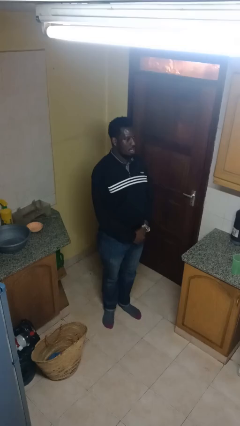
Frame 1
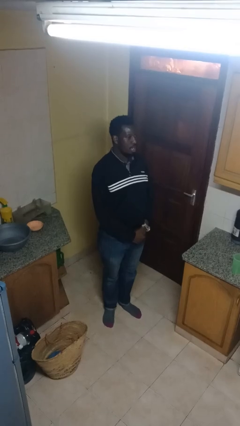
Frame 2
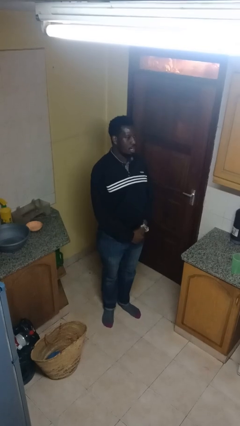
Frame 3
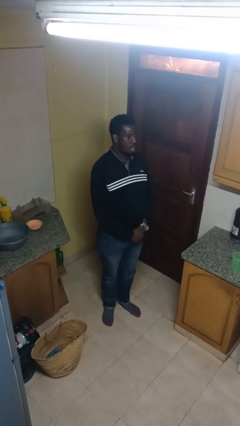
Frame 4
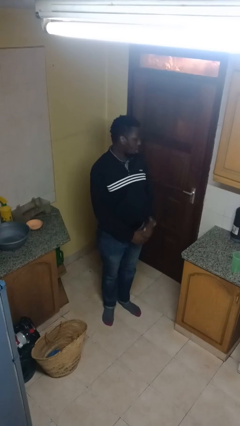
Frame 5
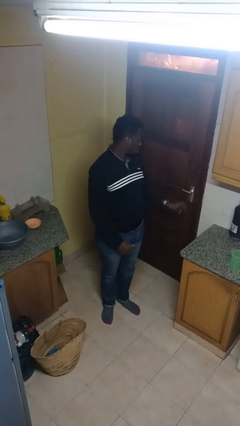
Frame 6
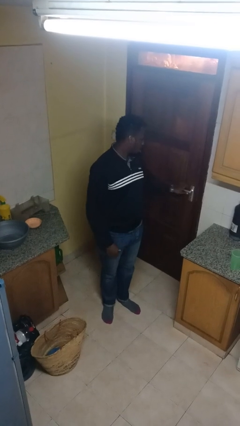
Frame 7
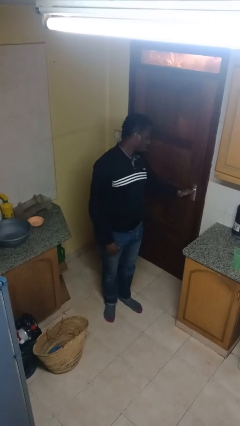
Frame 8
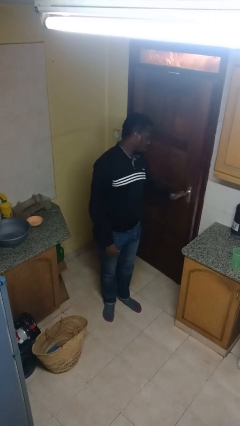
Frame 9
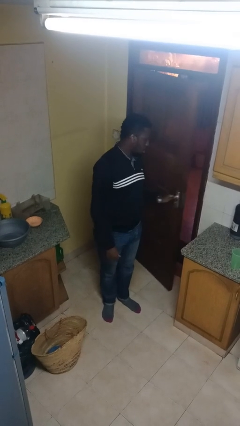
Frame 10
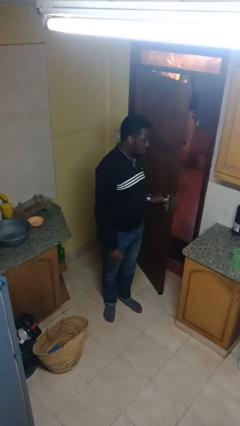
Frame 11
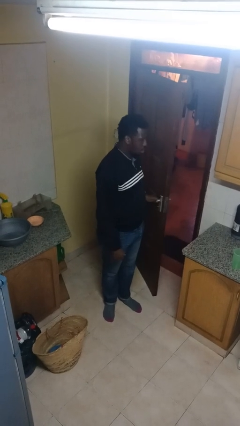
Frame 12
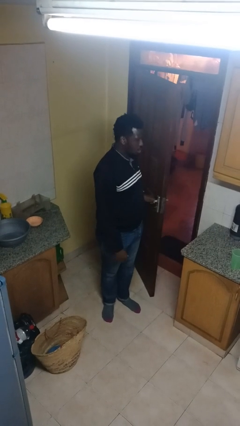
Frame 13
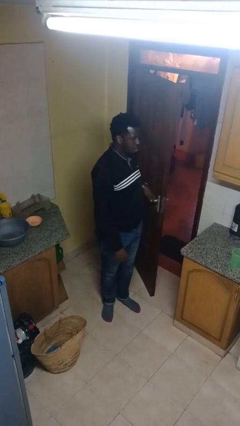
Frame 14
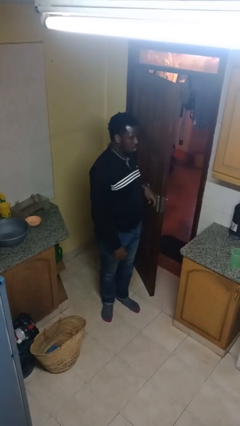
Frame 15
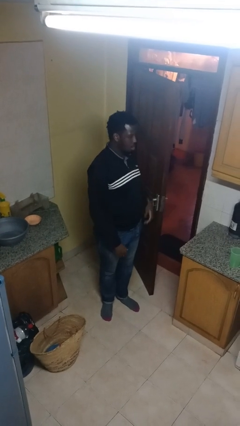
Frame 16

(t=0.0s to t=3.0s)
person opens facility door

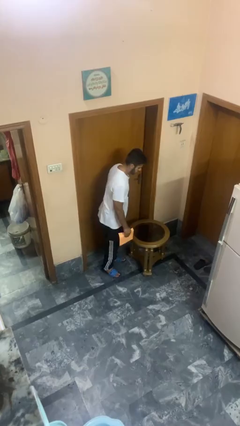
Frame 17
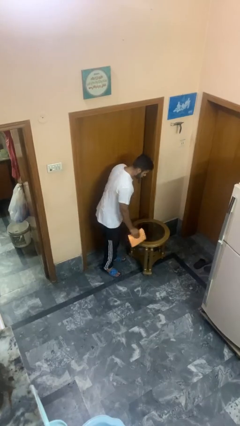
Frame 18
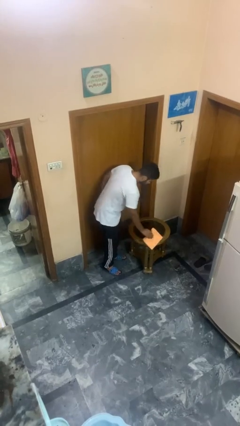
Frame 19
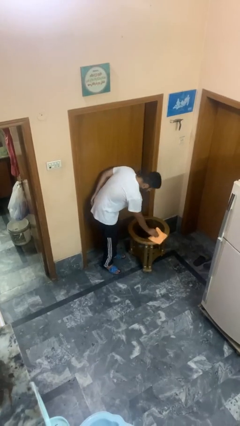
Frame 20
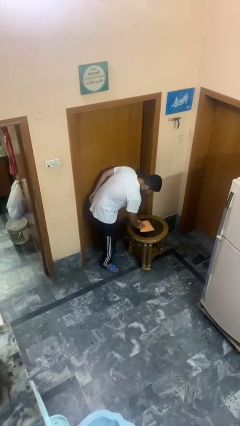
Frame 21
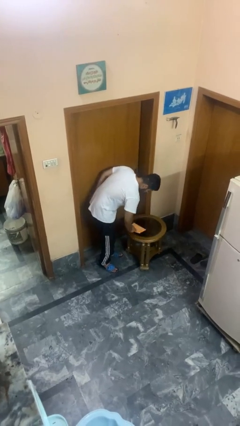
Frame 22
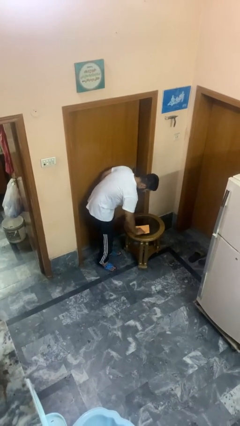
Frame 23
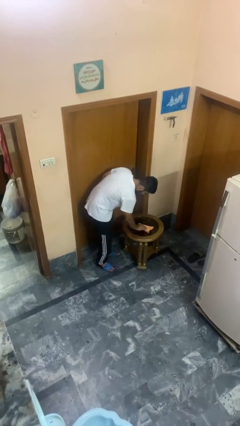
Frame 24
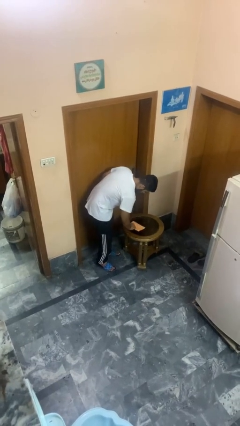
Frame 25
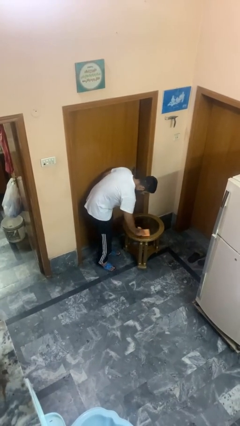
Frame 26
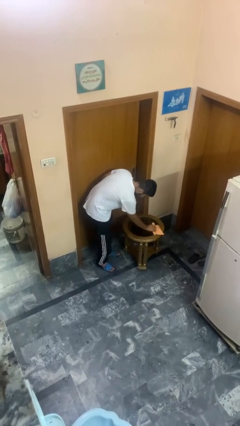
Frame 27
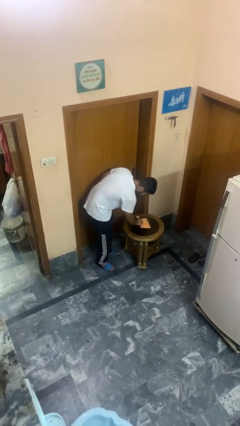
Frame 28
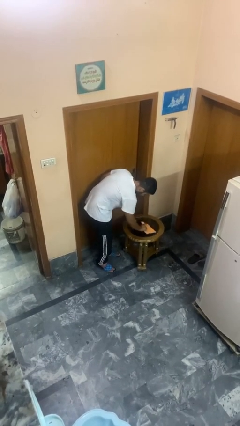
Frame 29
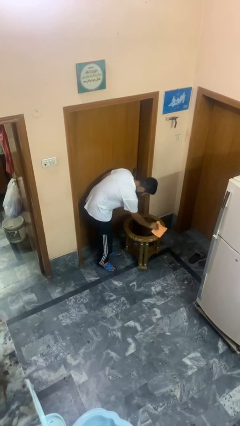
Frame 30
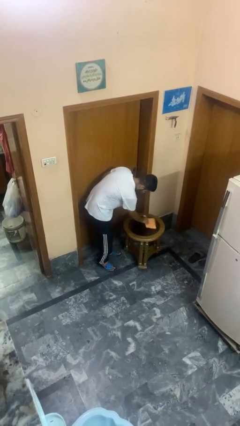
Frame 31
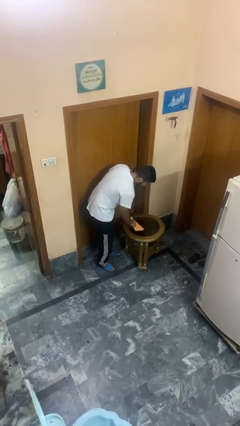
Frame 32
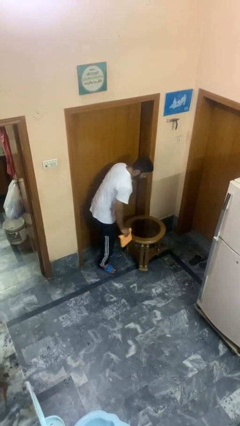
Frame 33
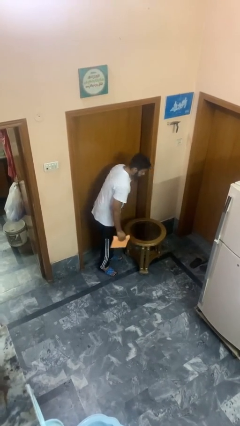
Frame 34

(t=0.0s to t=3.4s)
person cleans table with rag

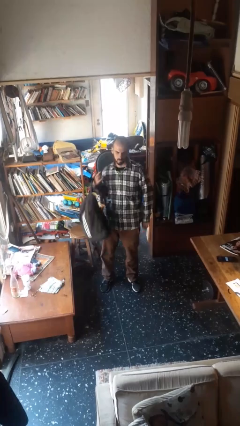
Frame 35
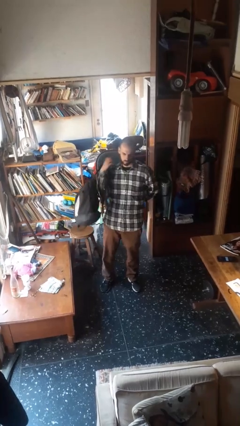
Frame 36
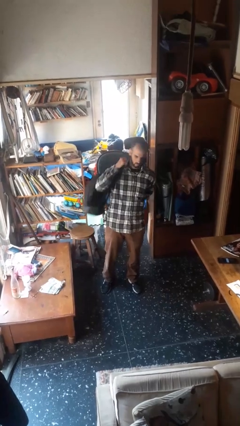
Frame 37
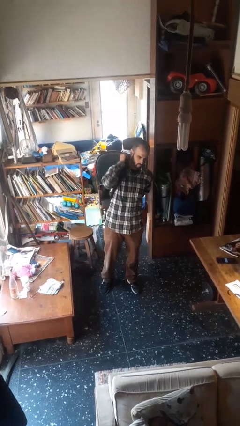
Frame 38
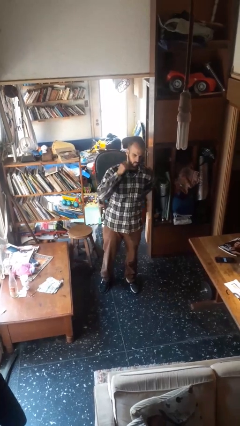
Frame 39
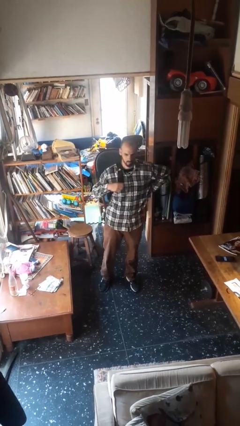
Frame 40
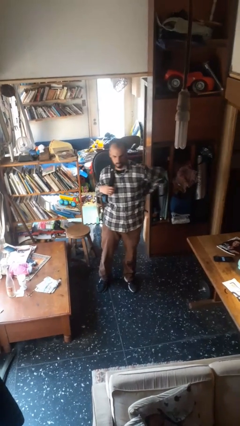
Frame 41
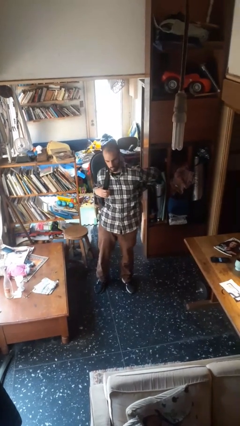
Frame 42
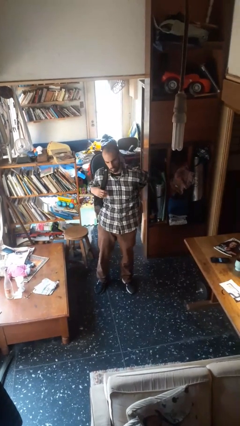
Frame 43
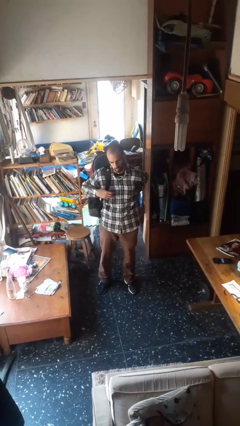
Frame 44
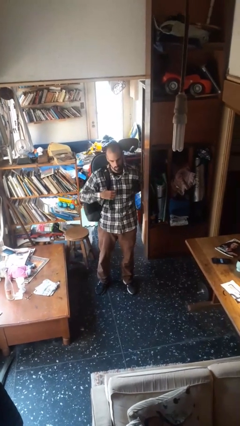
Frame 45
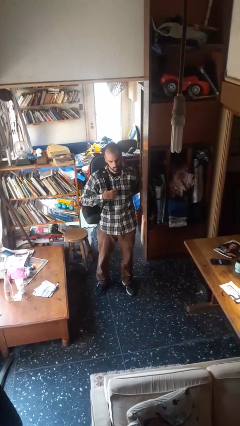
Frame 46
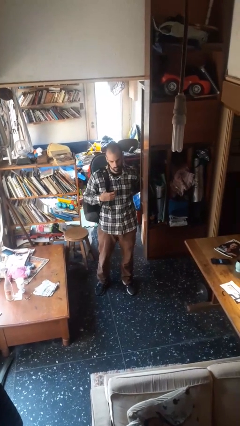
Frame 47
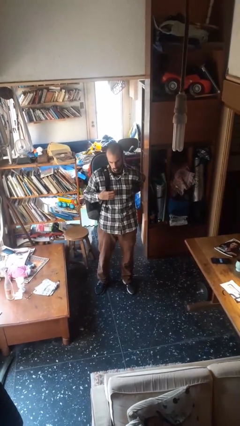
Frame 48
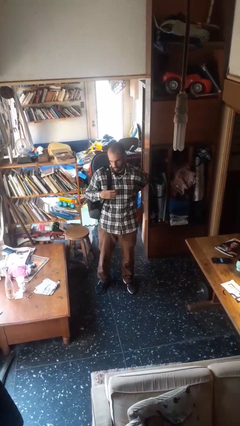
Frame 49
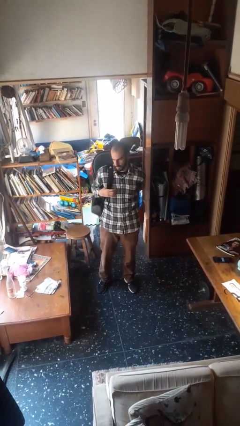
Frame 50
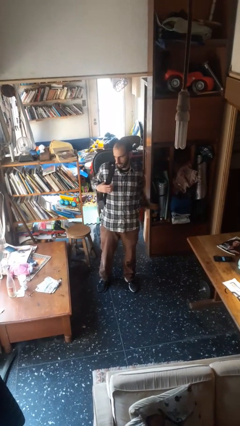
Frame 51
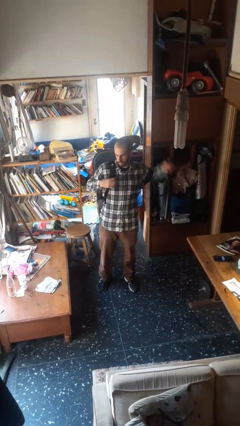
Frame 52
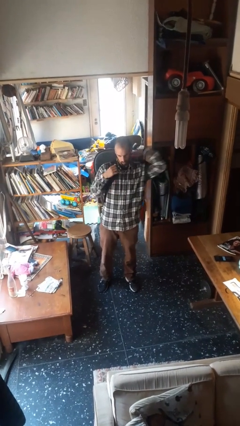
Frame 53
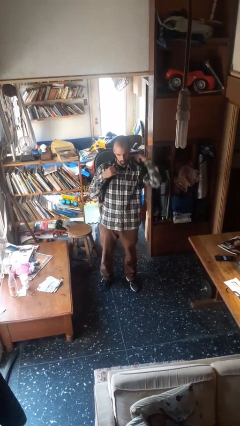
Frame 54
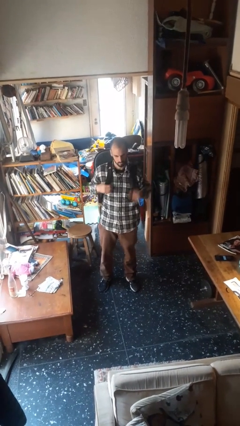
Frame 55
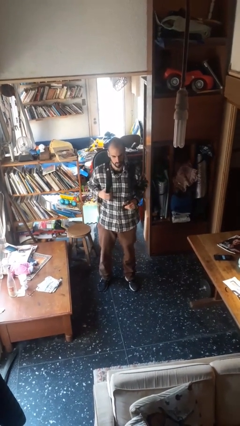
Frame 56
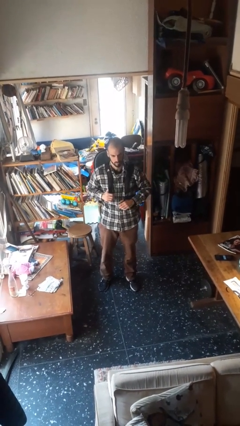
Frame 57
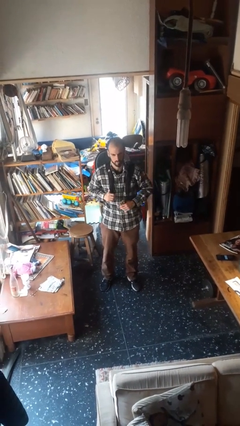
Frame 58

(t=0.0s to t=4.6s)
person puts on backpack

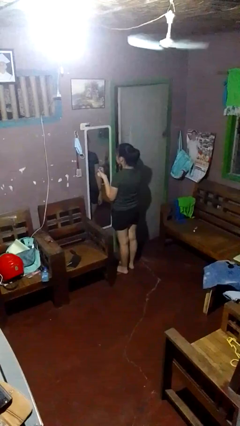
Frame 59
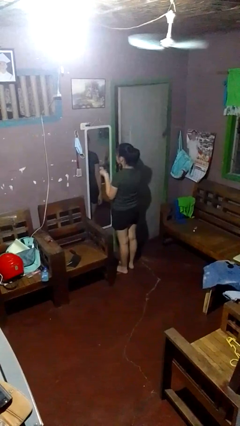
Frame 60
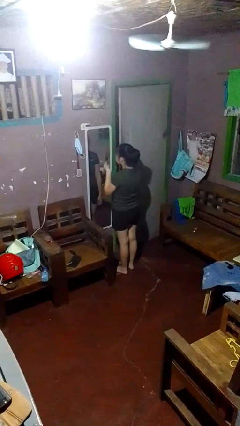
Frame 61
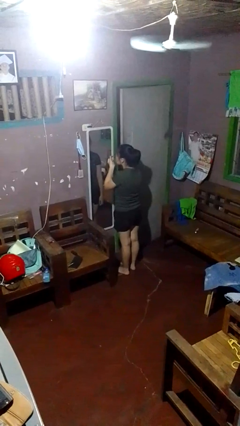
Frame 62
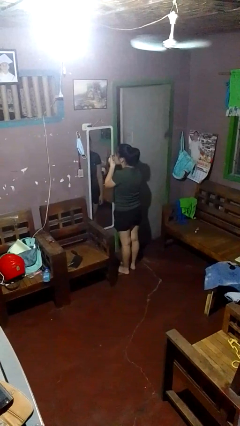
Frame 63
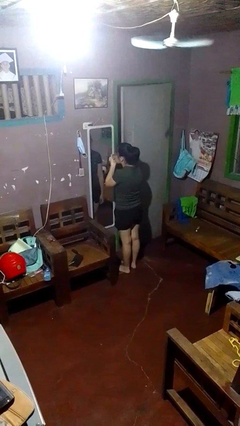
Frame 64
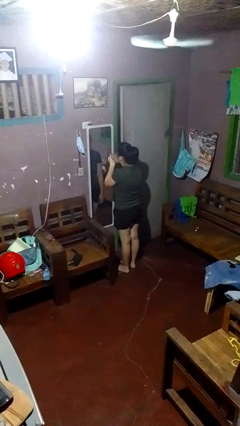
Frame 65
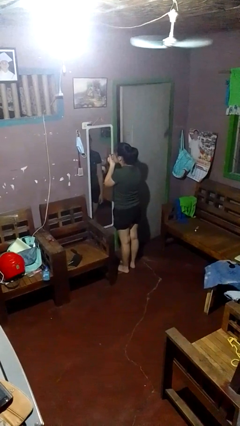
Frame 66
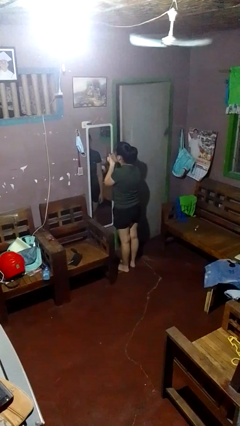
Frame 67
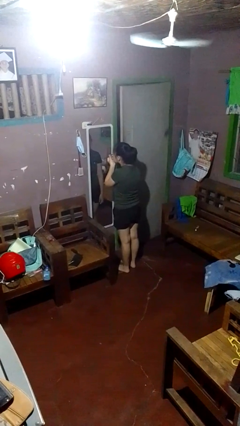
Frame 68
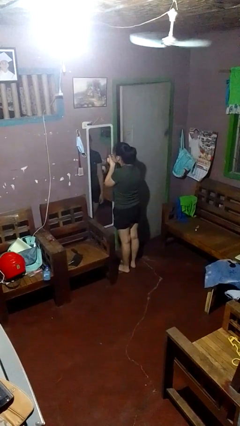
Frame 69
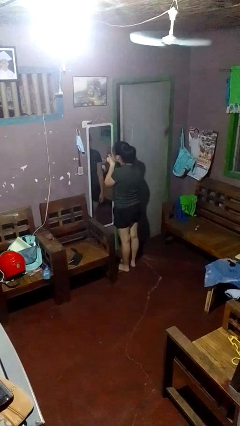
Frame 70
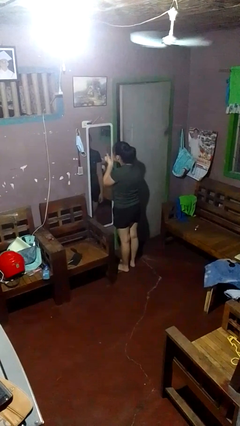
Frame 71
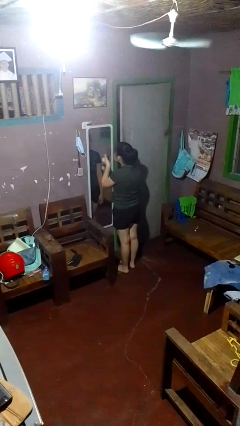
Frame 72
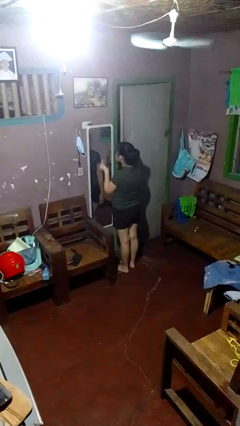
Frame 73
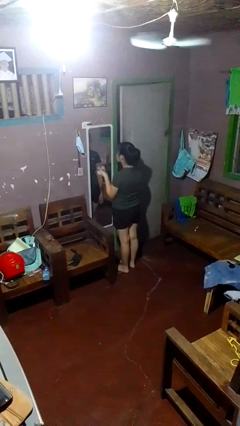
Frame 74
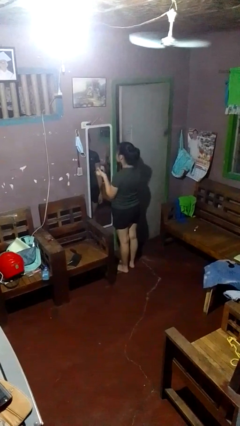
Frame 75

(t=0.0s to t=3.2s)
person applies eye makeup

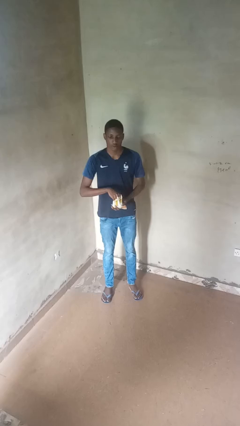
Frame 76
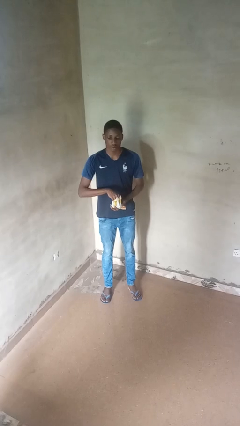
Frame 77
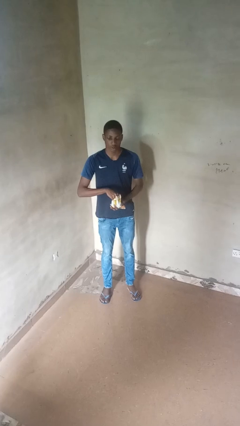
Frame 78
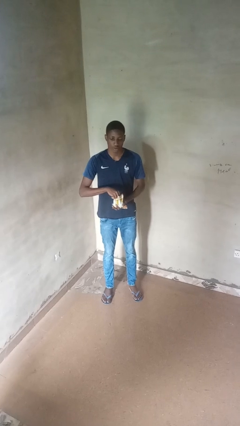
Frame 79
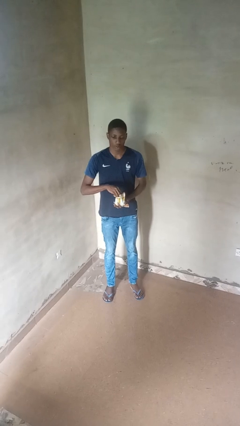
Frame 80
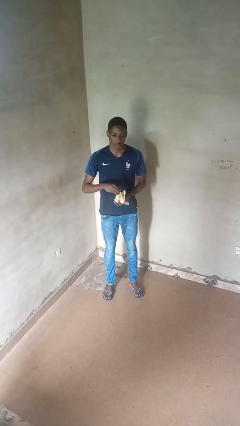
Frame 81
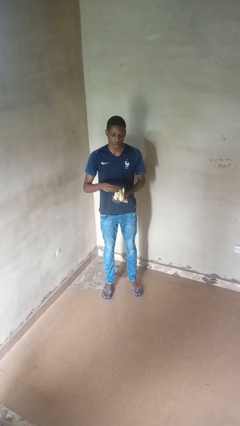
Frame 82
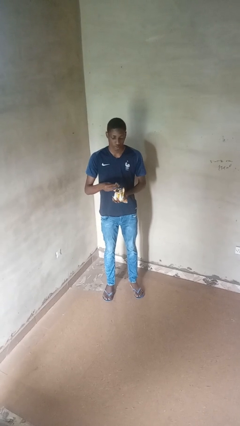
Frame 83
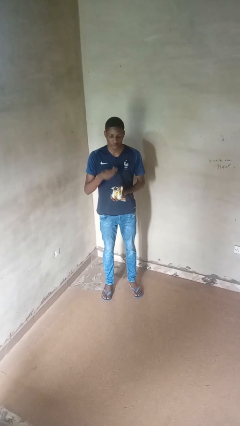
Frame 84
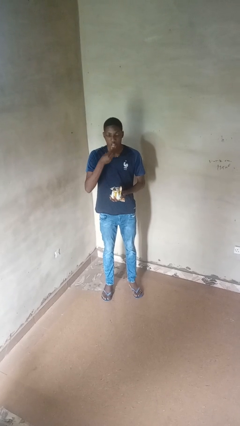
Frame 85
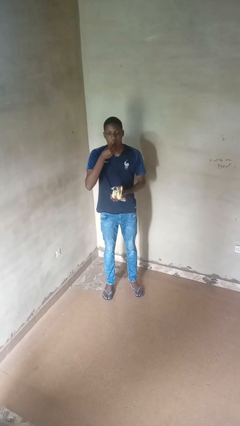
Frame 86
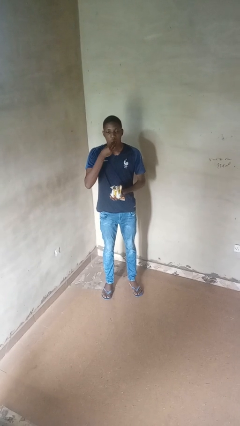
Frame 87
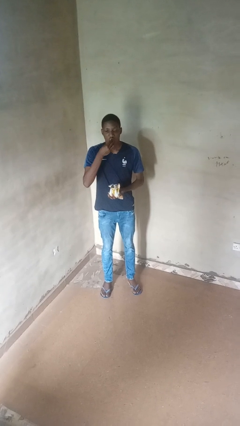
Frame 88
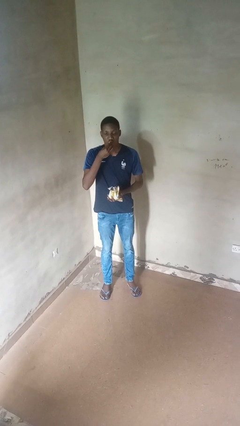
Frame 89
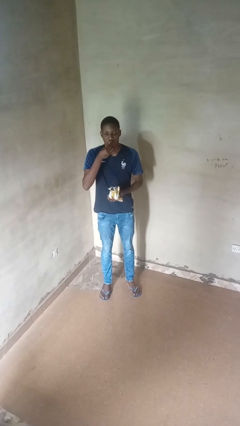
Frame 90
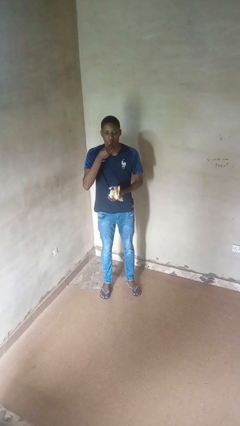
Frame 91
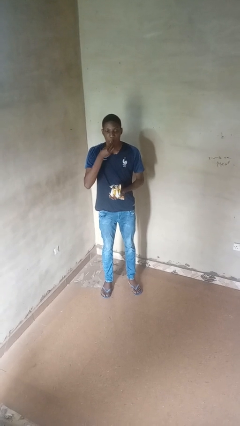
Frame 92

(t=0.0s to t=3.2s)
person eats snack from bag
